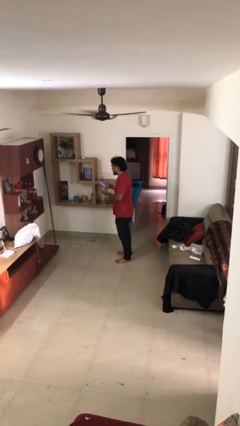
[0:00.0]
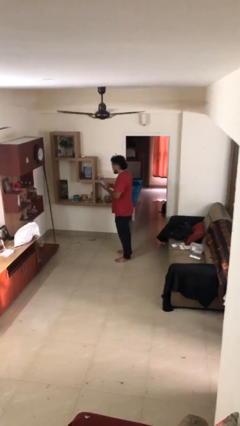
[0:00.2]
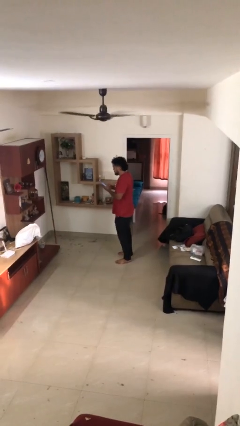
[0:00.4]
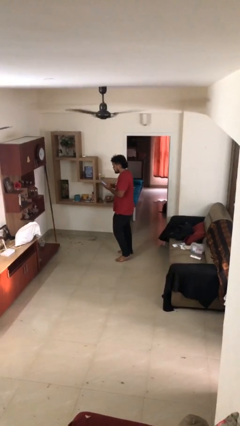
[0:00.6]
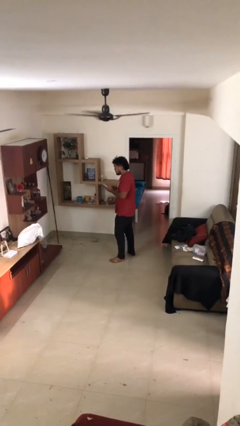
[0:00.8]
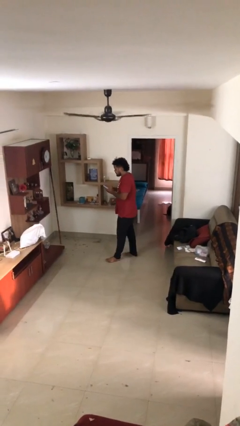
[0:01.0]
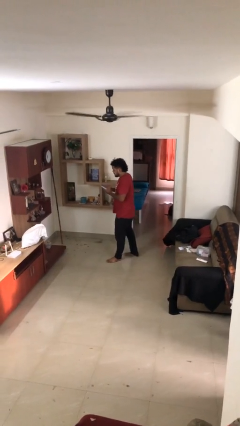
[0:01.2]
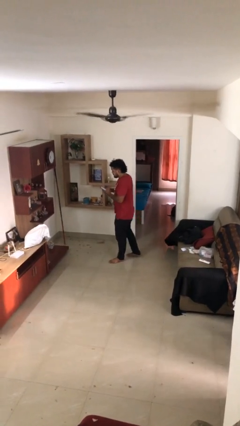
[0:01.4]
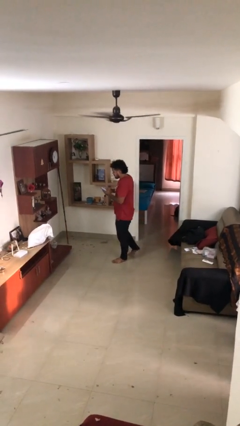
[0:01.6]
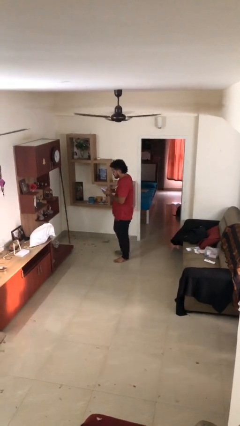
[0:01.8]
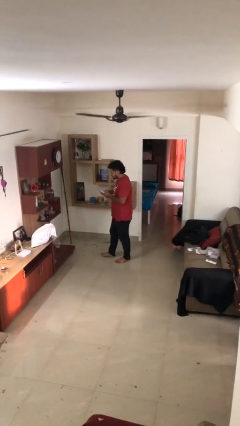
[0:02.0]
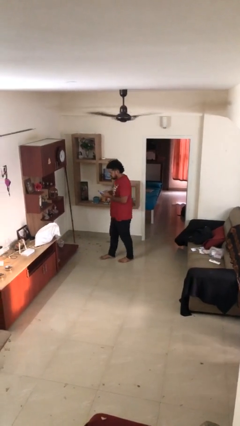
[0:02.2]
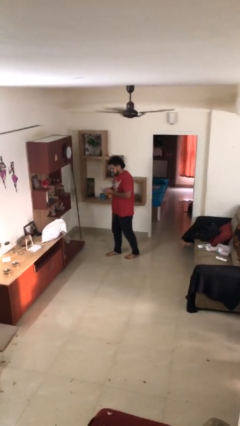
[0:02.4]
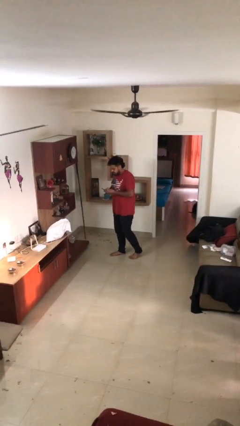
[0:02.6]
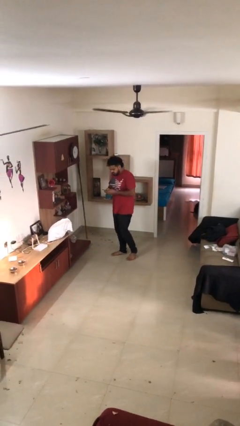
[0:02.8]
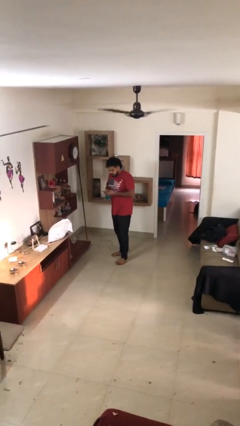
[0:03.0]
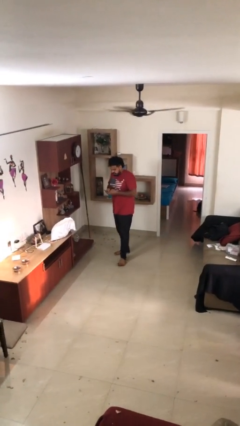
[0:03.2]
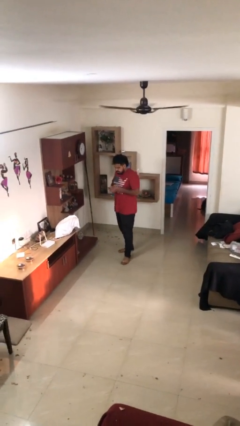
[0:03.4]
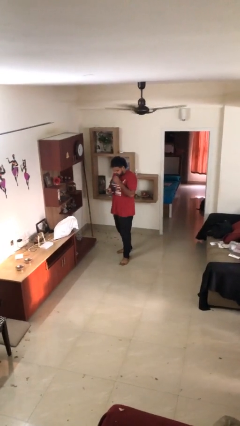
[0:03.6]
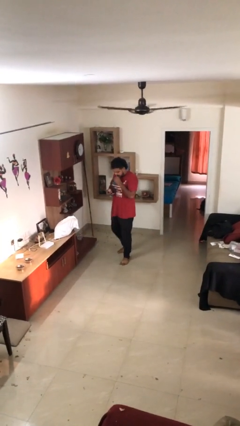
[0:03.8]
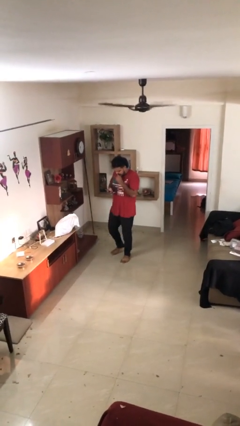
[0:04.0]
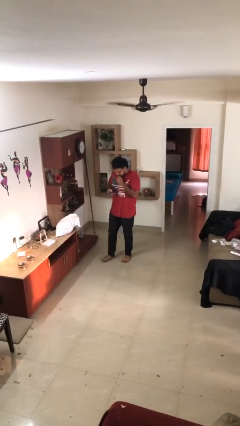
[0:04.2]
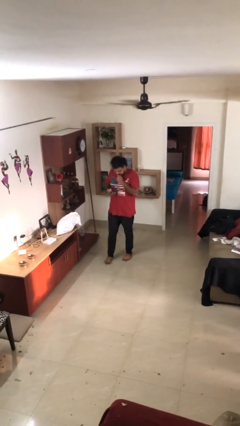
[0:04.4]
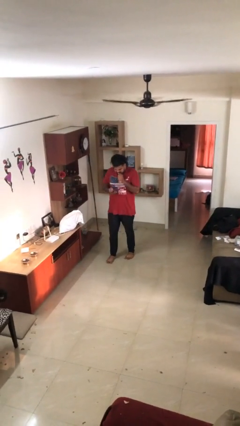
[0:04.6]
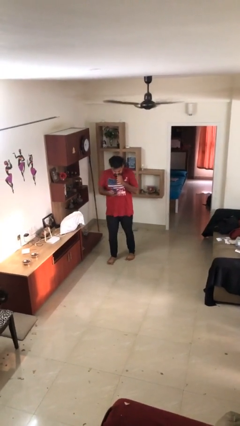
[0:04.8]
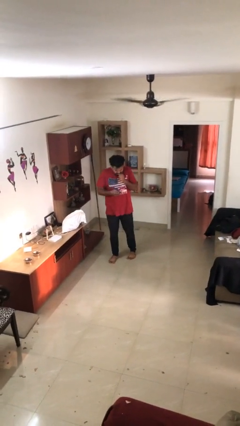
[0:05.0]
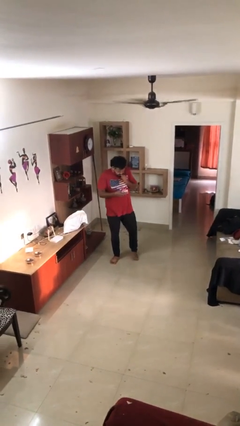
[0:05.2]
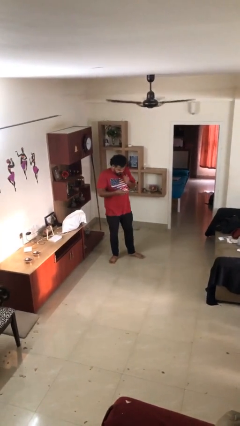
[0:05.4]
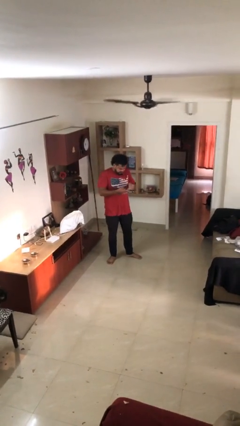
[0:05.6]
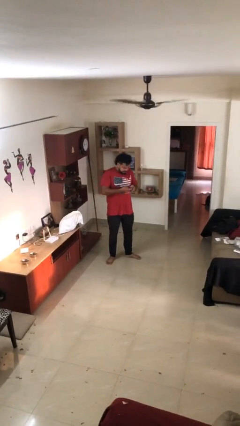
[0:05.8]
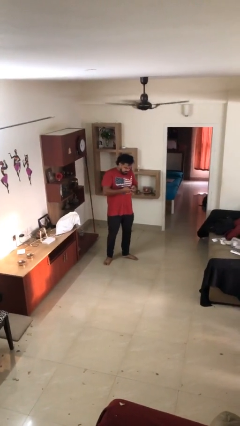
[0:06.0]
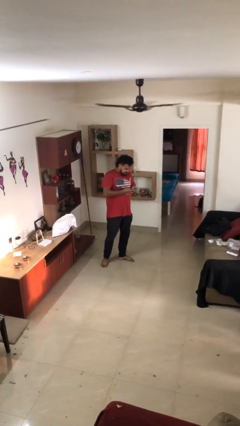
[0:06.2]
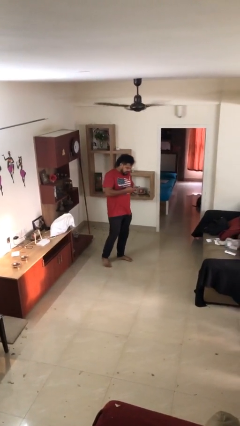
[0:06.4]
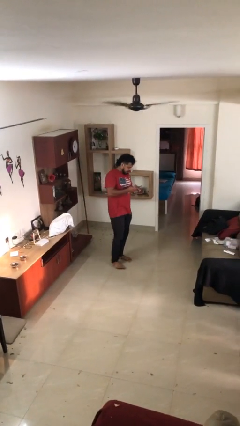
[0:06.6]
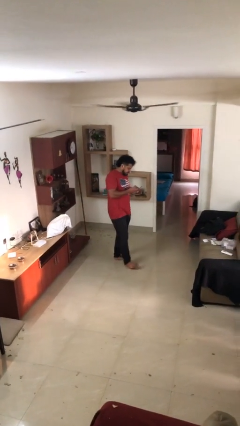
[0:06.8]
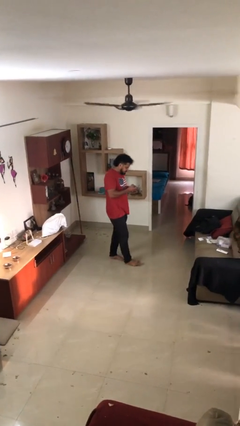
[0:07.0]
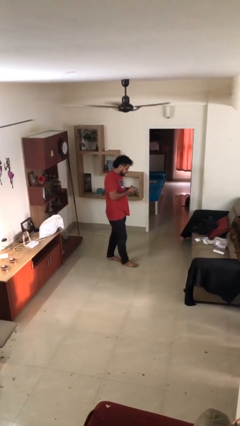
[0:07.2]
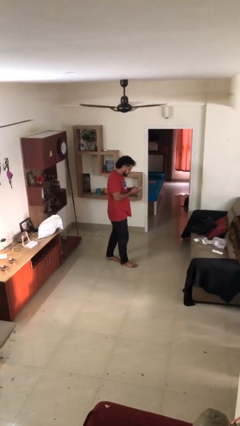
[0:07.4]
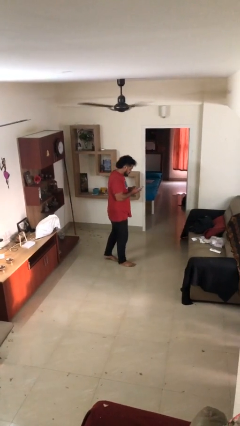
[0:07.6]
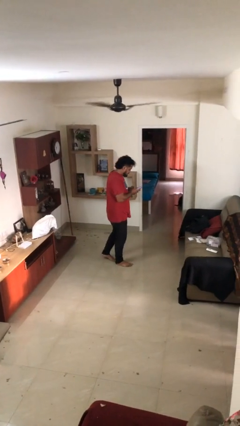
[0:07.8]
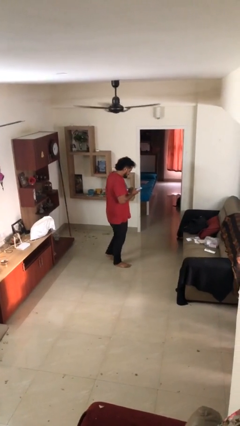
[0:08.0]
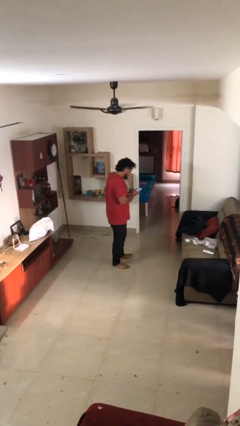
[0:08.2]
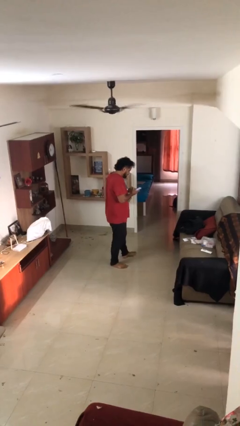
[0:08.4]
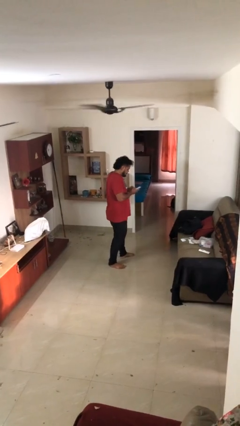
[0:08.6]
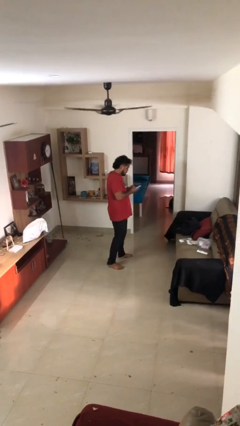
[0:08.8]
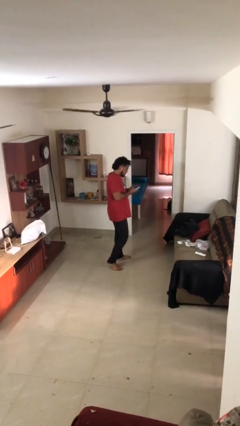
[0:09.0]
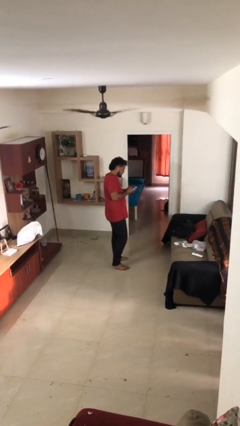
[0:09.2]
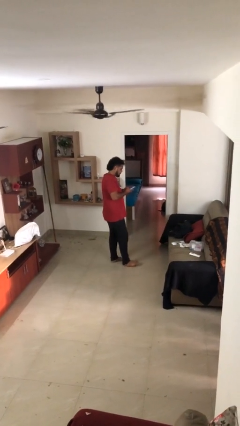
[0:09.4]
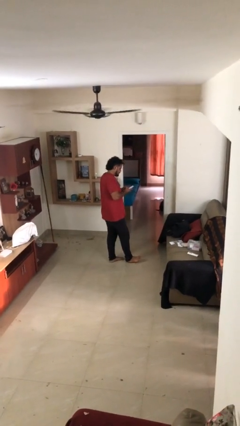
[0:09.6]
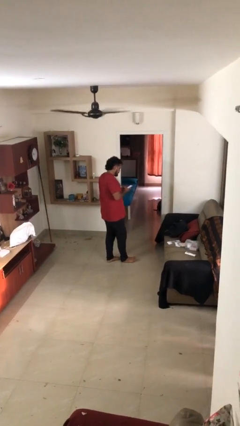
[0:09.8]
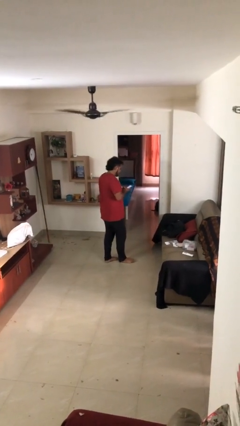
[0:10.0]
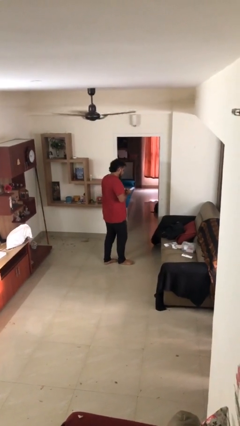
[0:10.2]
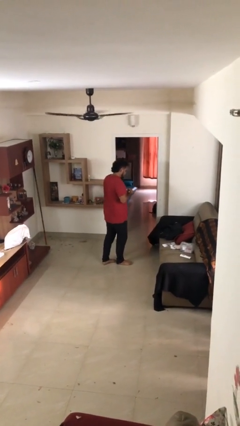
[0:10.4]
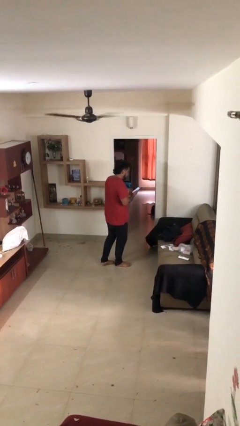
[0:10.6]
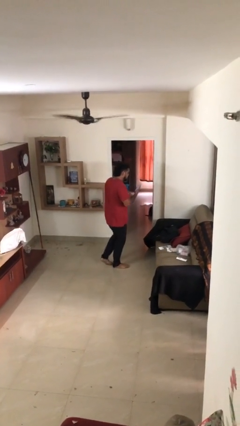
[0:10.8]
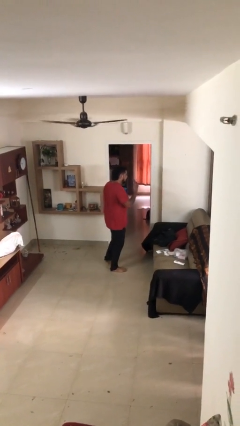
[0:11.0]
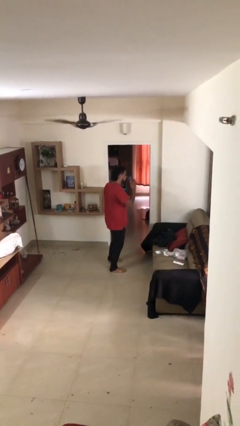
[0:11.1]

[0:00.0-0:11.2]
person texts on phone

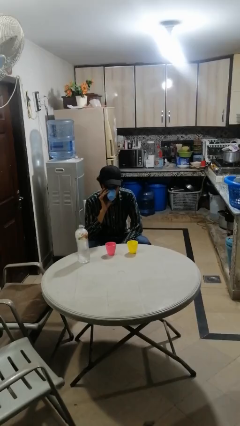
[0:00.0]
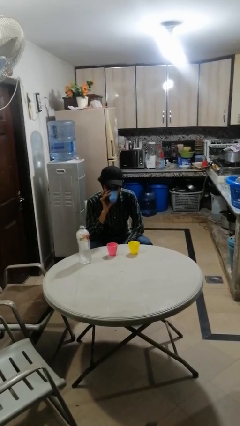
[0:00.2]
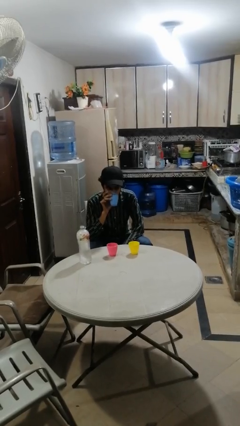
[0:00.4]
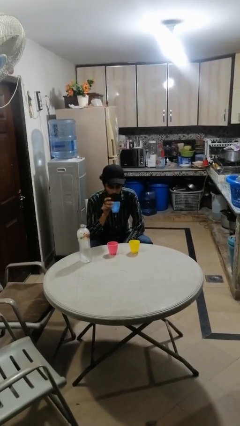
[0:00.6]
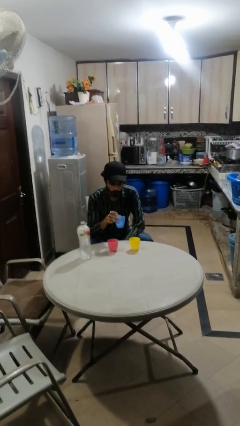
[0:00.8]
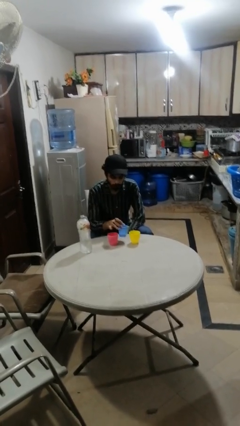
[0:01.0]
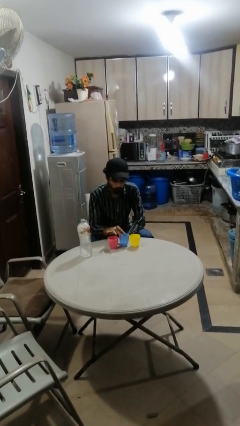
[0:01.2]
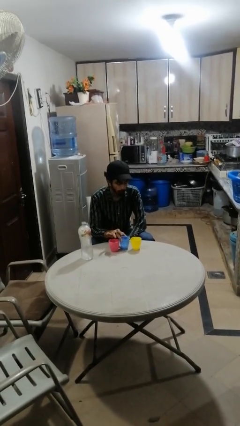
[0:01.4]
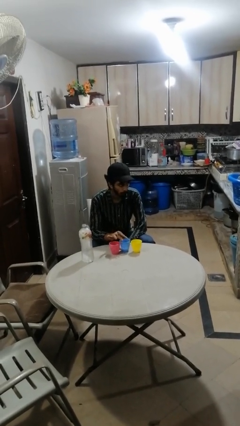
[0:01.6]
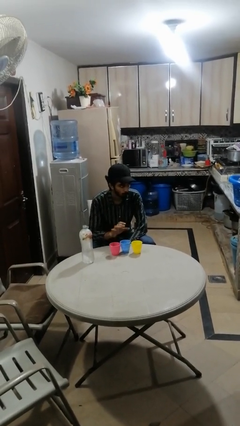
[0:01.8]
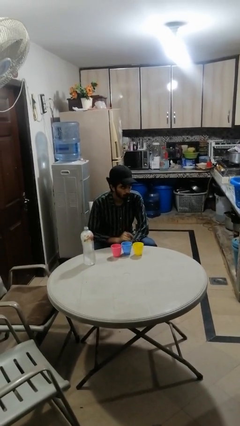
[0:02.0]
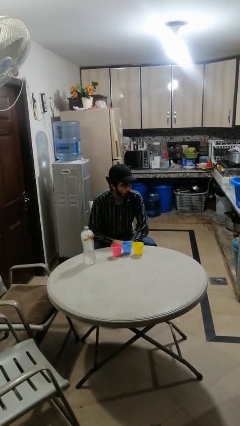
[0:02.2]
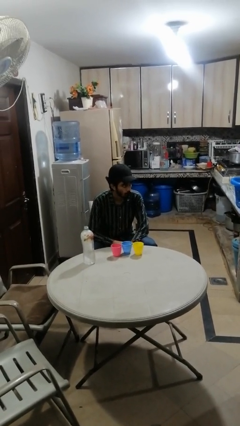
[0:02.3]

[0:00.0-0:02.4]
person puts down object on table

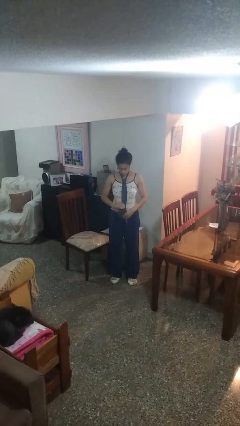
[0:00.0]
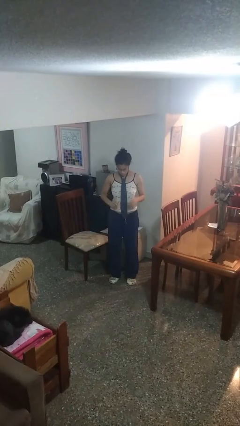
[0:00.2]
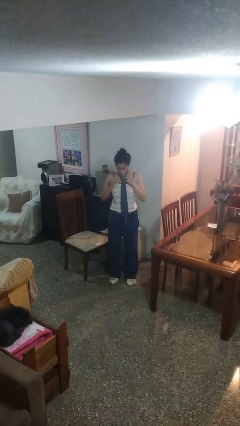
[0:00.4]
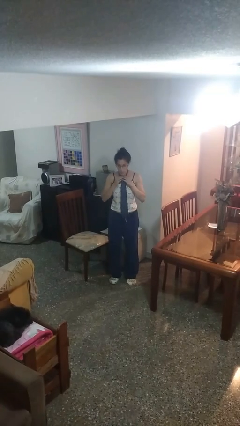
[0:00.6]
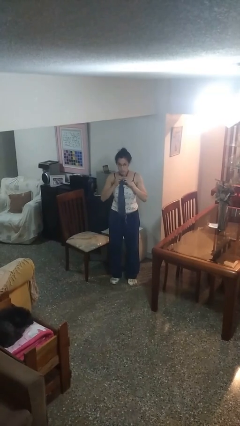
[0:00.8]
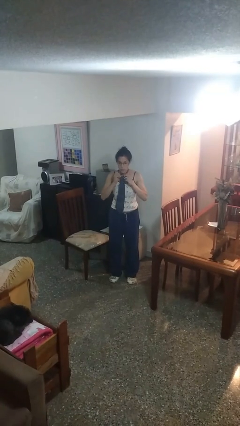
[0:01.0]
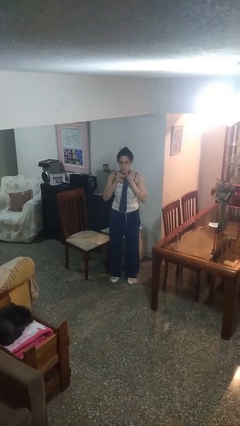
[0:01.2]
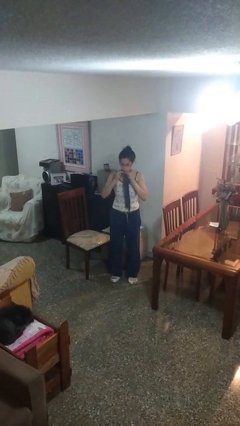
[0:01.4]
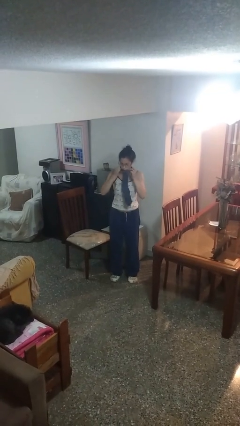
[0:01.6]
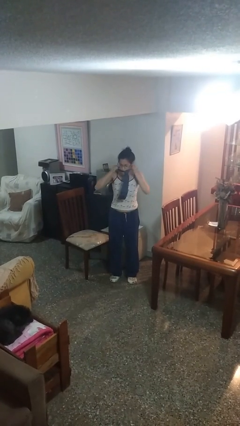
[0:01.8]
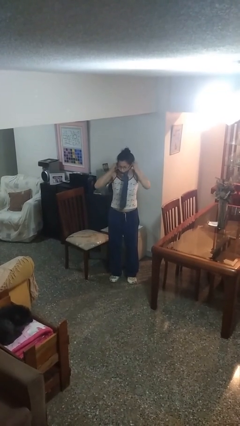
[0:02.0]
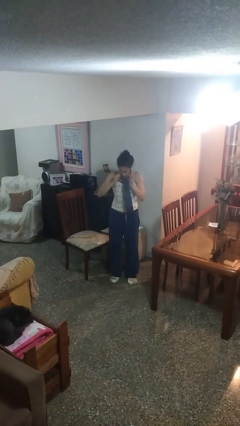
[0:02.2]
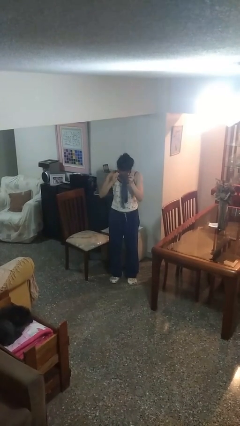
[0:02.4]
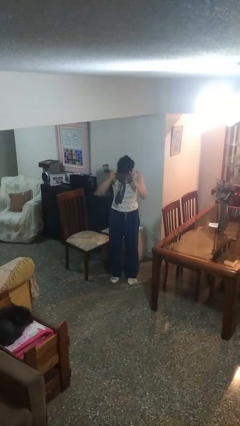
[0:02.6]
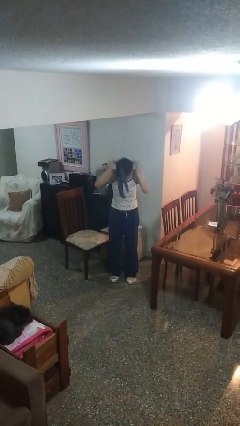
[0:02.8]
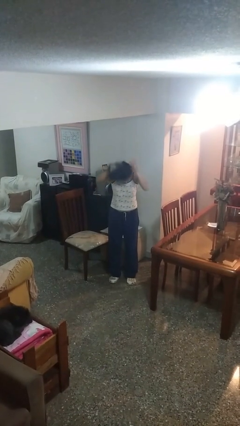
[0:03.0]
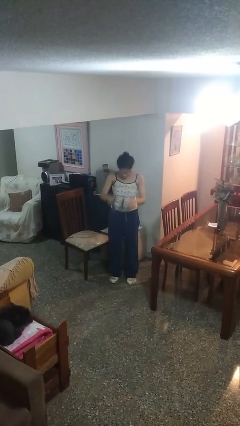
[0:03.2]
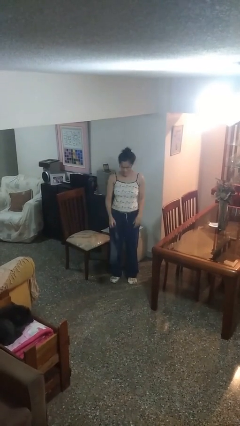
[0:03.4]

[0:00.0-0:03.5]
person takes off necktie

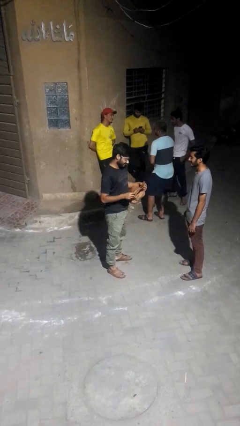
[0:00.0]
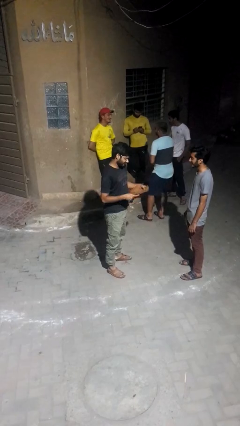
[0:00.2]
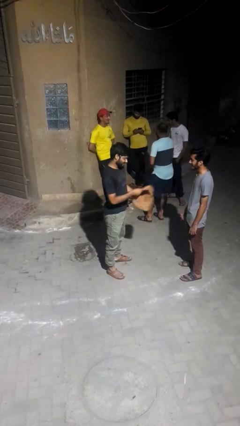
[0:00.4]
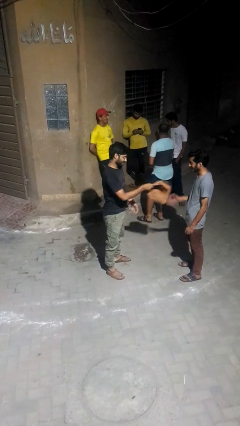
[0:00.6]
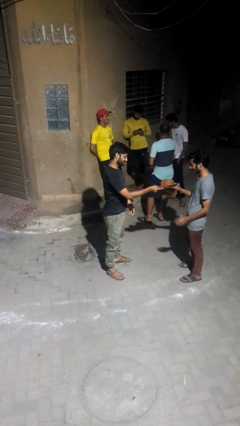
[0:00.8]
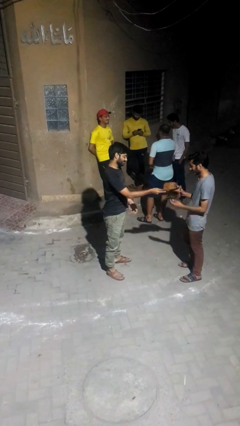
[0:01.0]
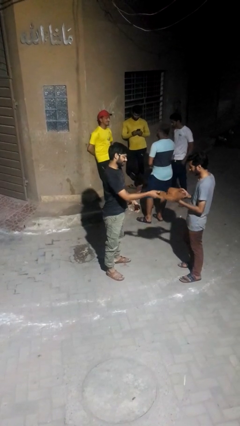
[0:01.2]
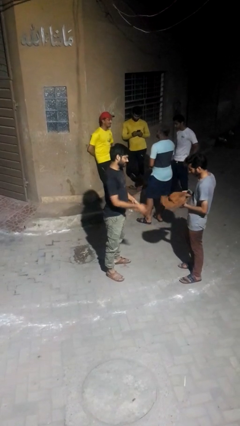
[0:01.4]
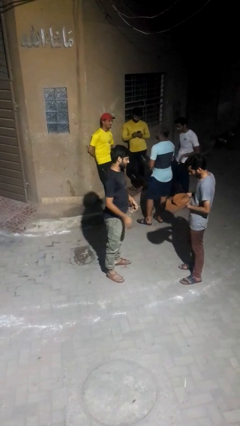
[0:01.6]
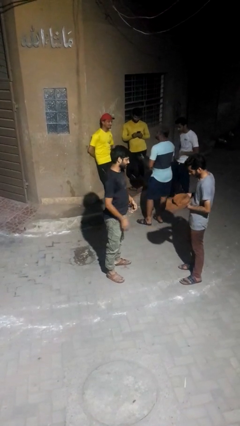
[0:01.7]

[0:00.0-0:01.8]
person transfers object to person
